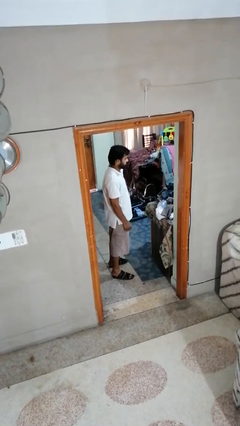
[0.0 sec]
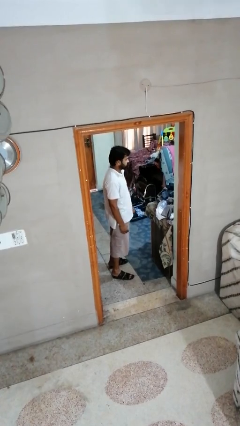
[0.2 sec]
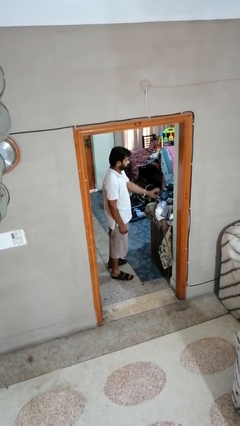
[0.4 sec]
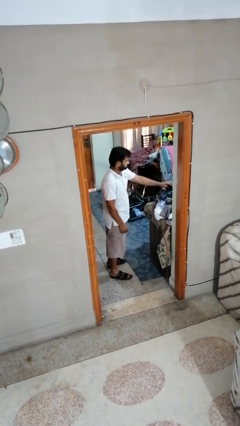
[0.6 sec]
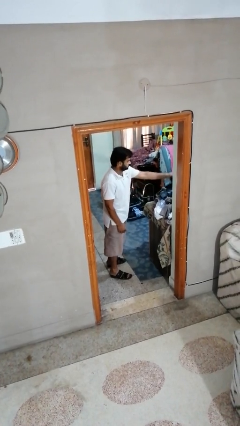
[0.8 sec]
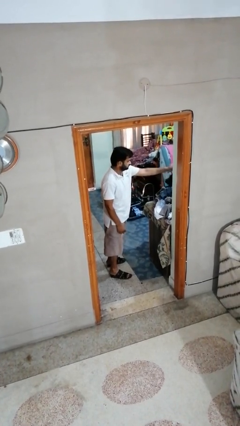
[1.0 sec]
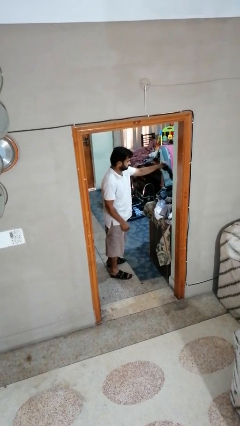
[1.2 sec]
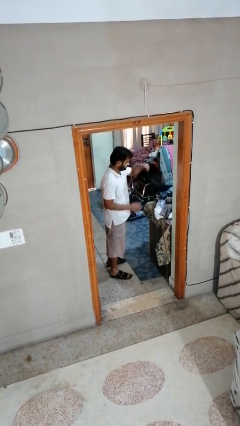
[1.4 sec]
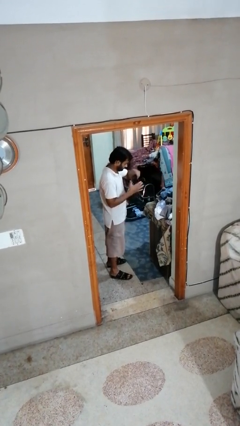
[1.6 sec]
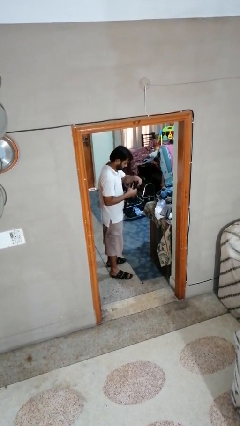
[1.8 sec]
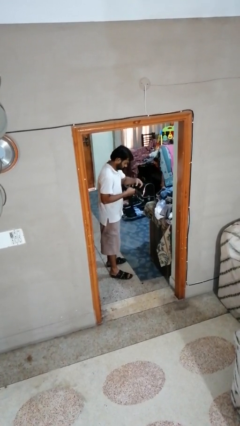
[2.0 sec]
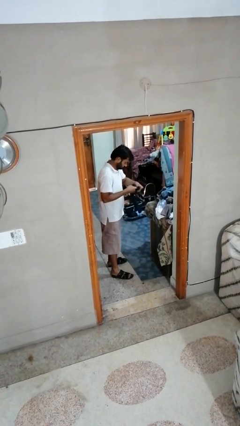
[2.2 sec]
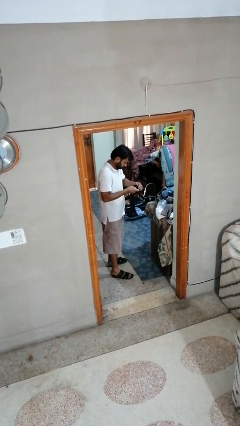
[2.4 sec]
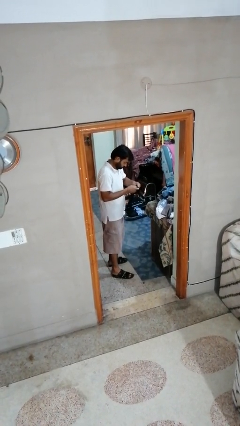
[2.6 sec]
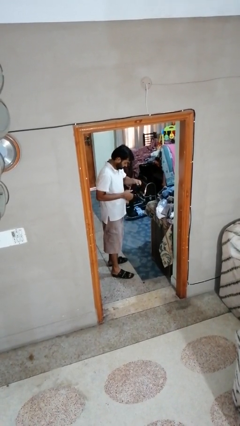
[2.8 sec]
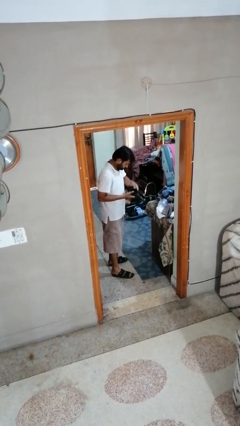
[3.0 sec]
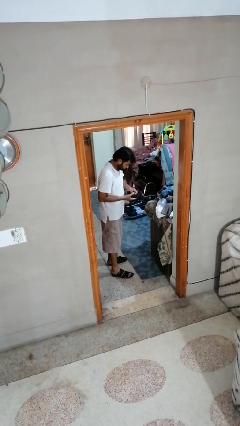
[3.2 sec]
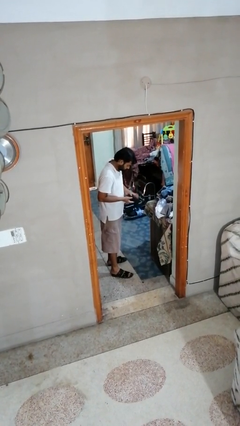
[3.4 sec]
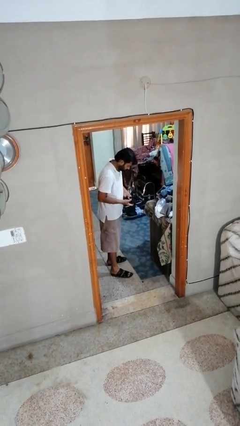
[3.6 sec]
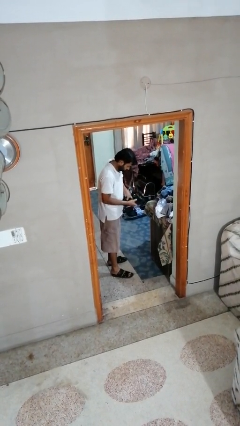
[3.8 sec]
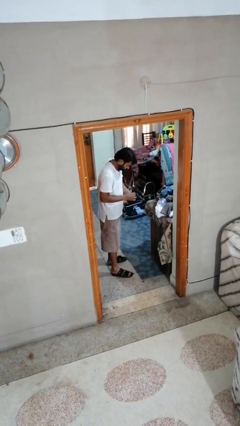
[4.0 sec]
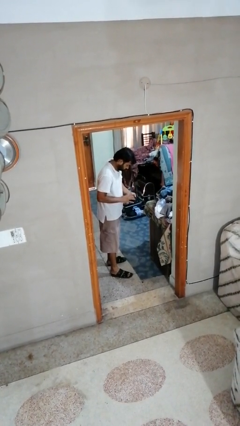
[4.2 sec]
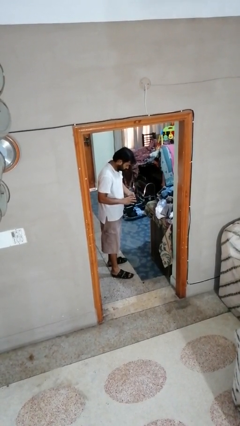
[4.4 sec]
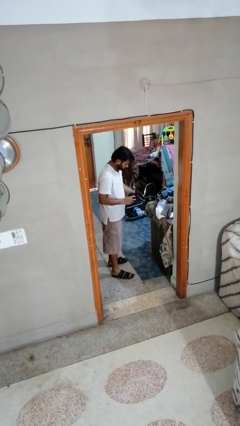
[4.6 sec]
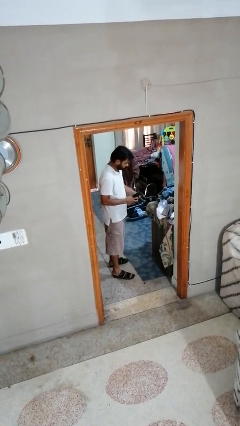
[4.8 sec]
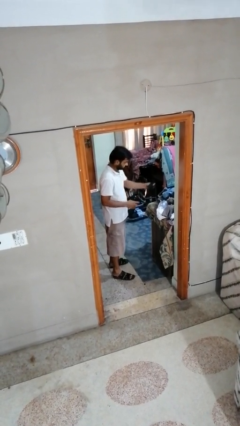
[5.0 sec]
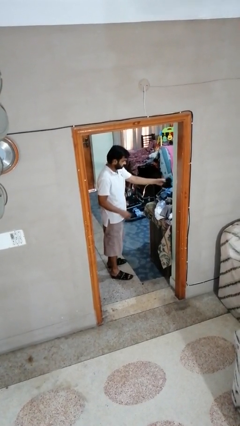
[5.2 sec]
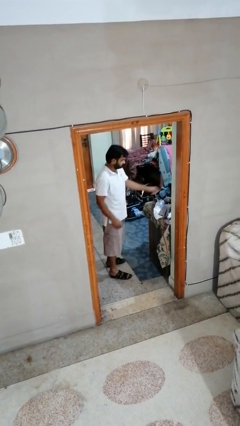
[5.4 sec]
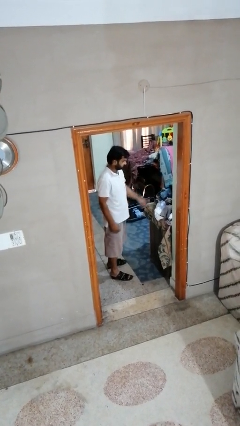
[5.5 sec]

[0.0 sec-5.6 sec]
person folds socks

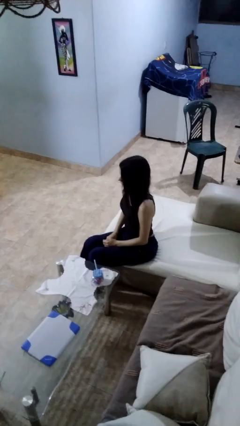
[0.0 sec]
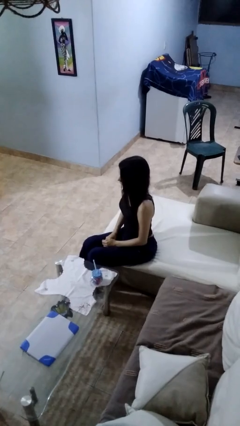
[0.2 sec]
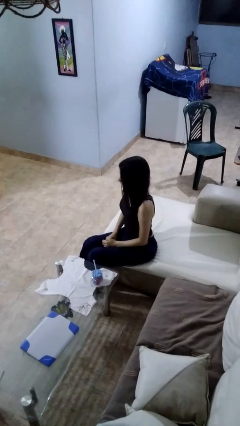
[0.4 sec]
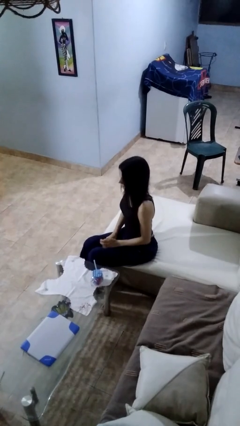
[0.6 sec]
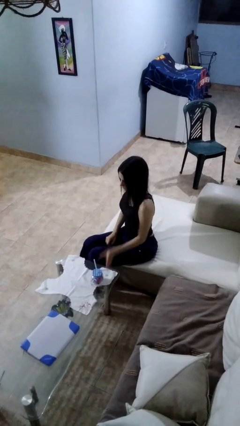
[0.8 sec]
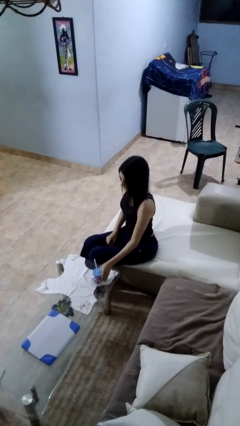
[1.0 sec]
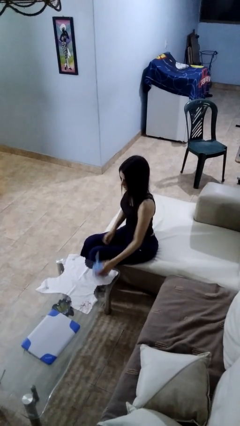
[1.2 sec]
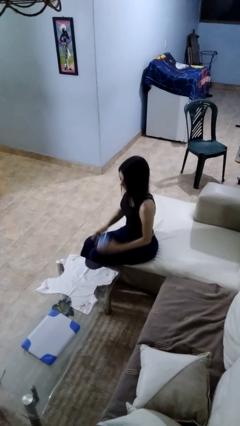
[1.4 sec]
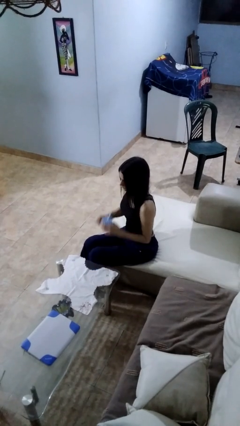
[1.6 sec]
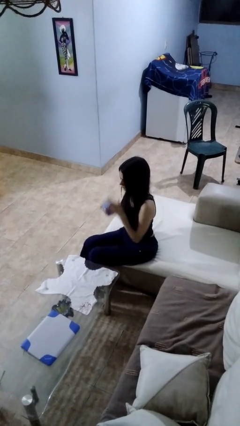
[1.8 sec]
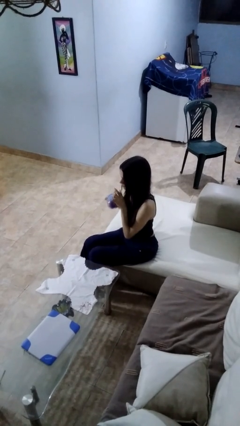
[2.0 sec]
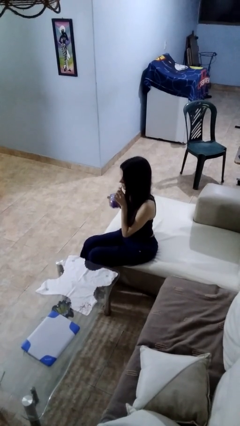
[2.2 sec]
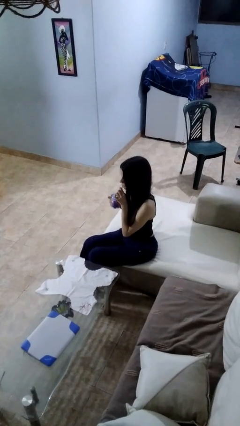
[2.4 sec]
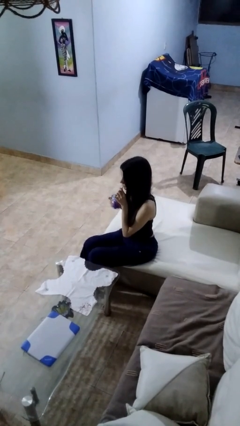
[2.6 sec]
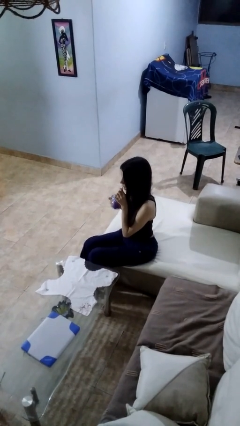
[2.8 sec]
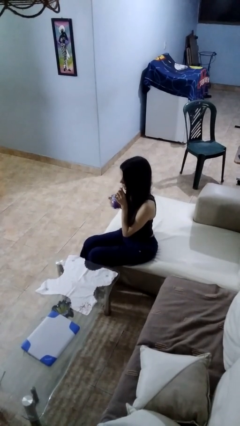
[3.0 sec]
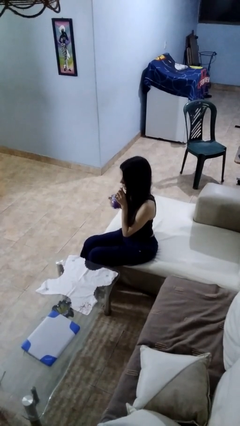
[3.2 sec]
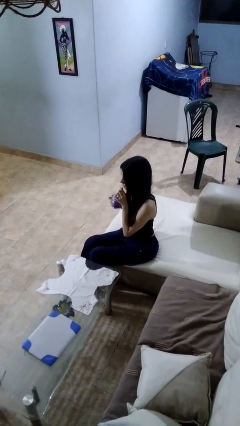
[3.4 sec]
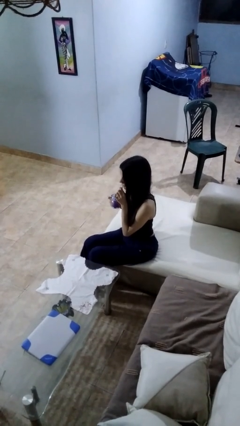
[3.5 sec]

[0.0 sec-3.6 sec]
person drinks from straw

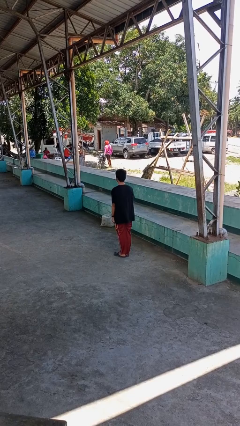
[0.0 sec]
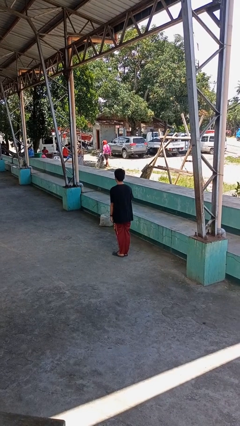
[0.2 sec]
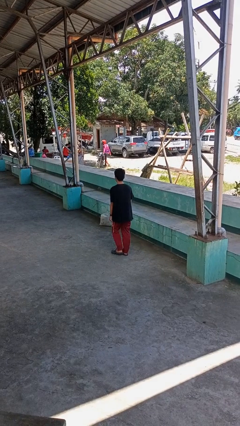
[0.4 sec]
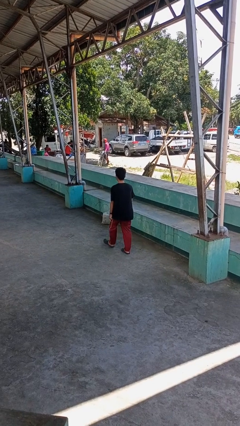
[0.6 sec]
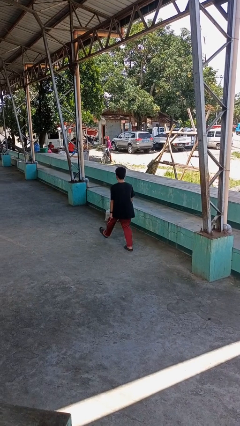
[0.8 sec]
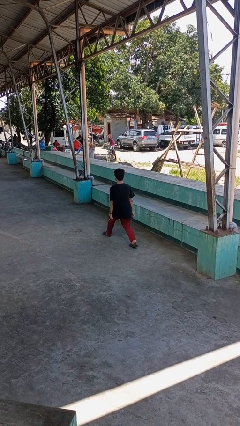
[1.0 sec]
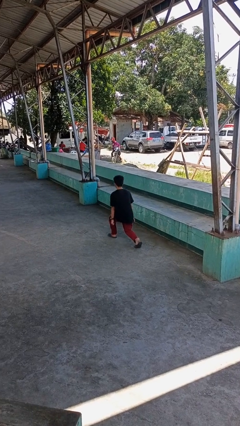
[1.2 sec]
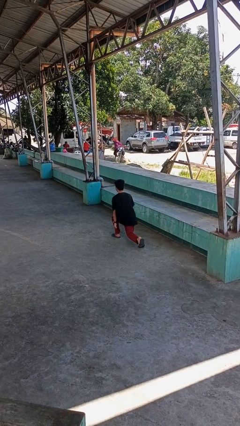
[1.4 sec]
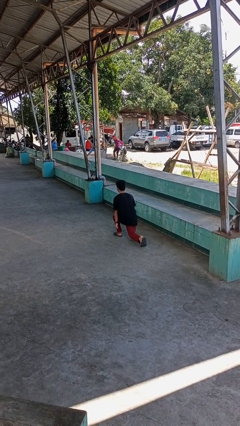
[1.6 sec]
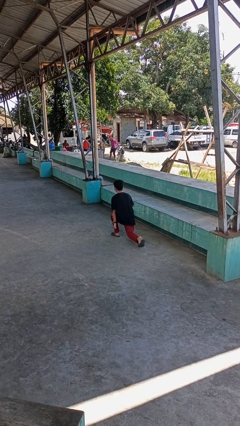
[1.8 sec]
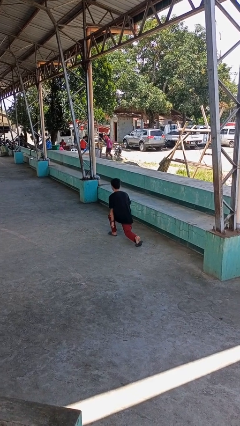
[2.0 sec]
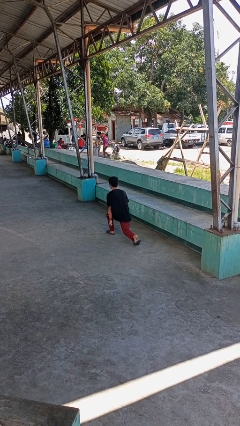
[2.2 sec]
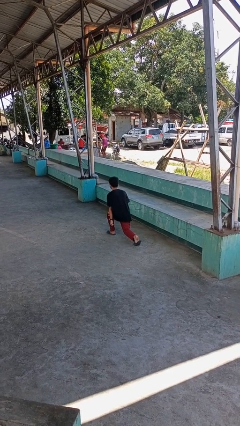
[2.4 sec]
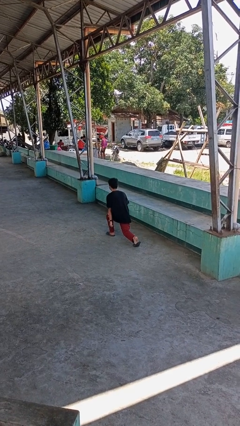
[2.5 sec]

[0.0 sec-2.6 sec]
person exercises with lunges

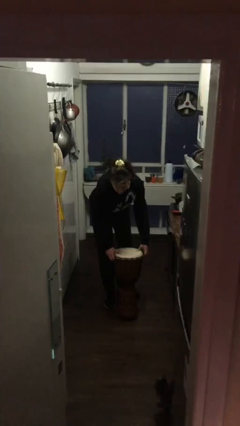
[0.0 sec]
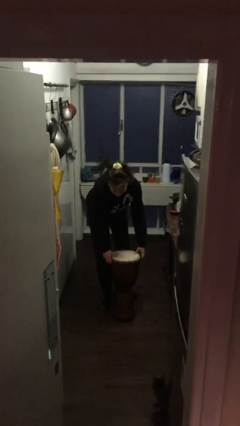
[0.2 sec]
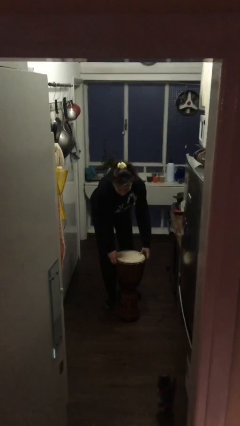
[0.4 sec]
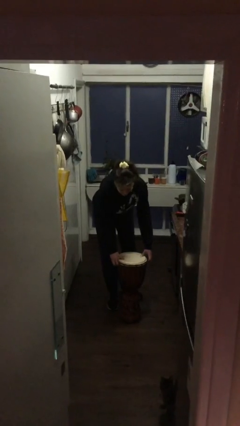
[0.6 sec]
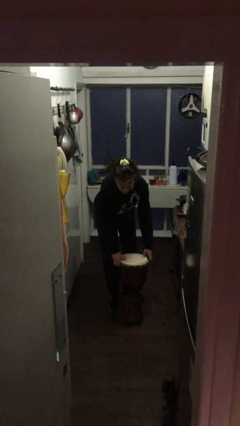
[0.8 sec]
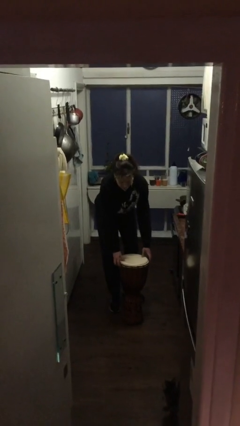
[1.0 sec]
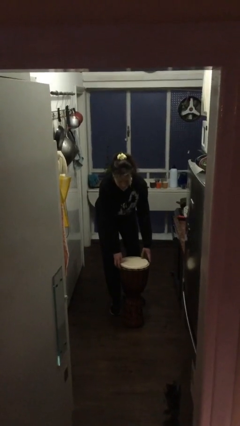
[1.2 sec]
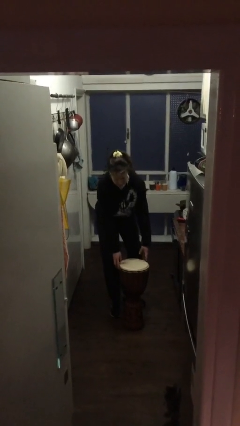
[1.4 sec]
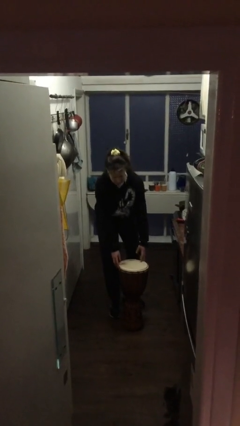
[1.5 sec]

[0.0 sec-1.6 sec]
person puts down object on floor

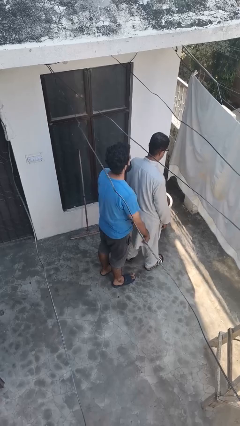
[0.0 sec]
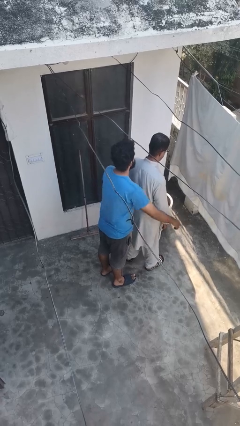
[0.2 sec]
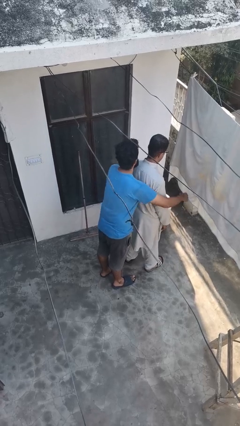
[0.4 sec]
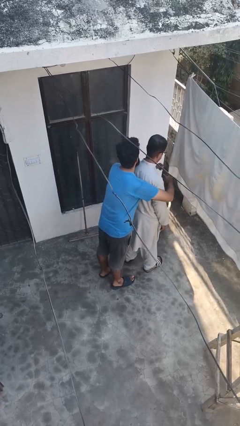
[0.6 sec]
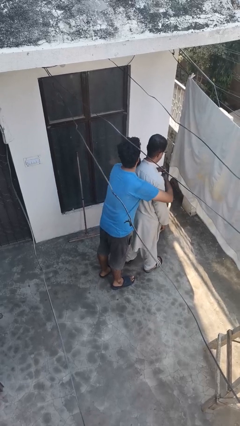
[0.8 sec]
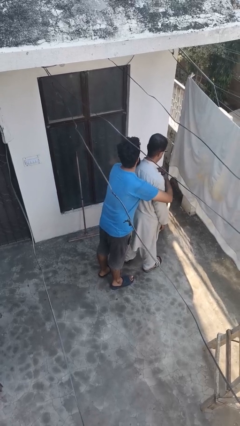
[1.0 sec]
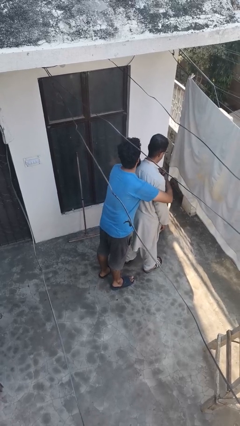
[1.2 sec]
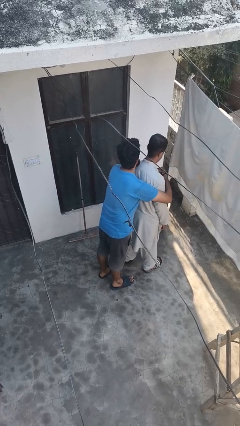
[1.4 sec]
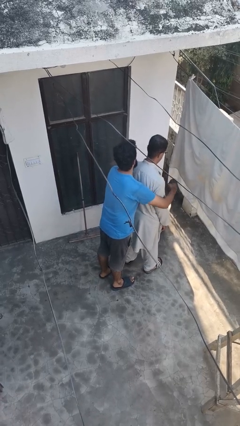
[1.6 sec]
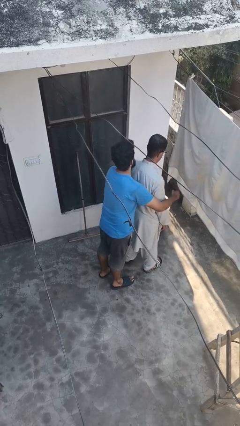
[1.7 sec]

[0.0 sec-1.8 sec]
person hugs person from behind

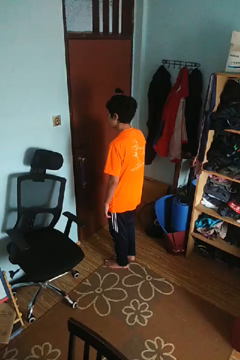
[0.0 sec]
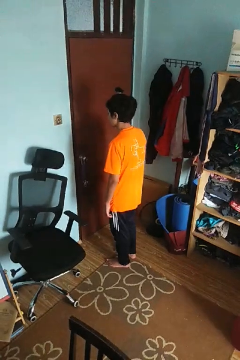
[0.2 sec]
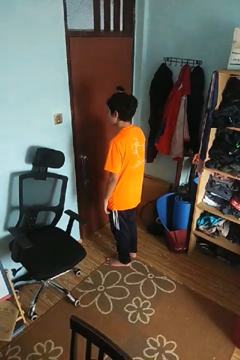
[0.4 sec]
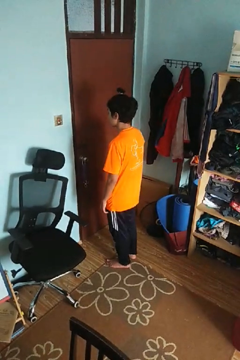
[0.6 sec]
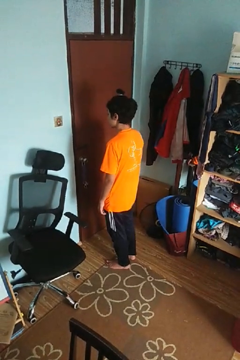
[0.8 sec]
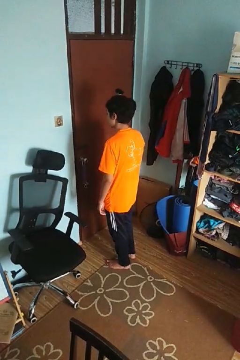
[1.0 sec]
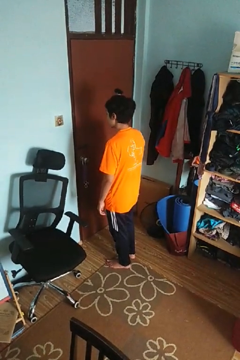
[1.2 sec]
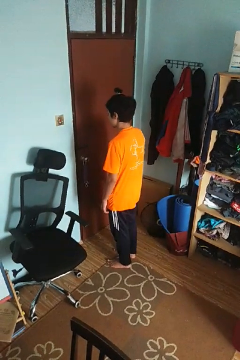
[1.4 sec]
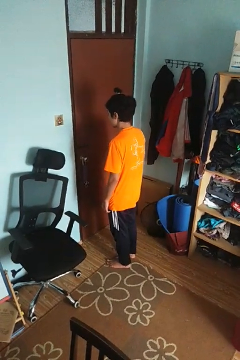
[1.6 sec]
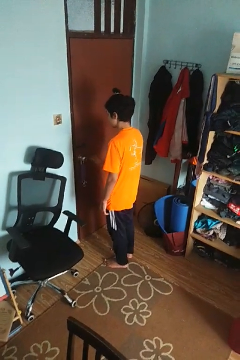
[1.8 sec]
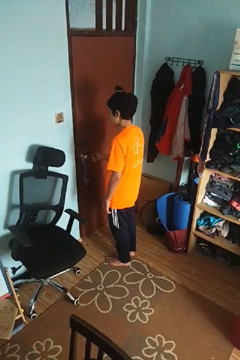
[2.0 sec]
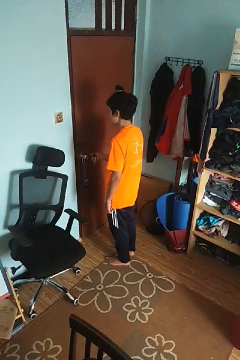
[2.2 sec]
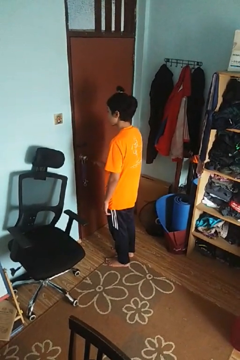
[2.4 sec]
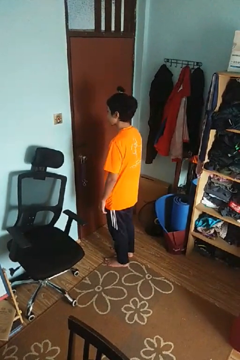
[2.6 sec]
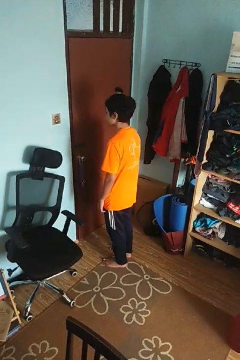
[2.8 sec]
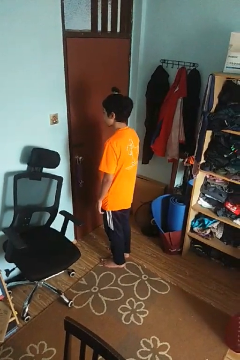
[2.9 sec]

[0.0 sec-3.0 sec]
person unlocks door with keys
